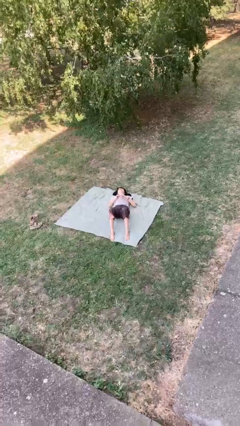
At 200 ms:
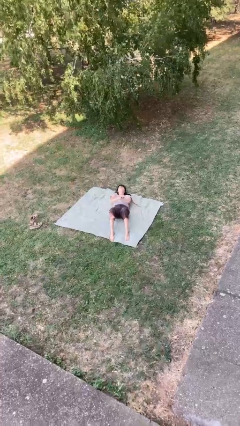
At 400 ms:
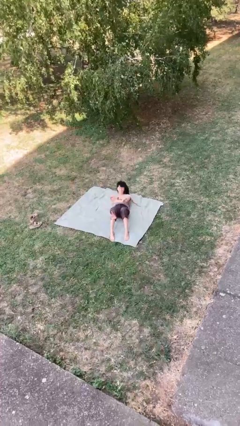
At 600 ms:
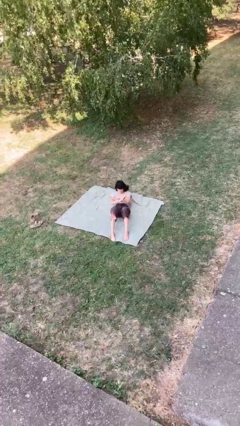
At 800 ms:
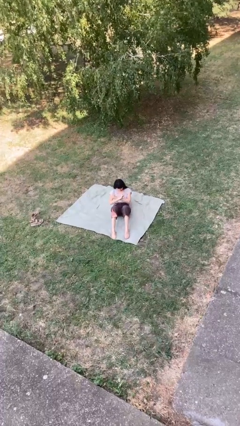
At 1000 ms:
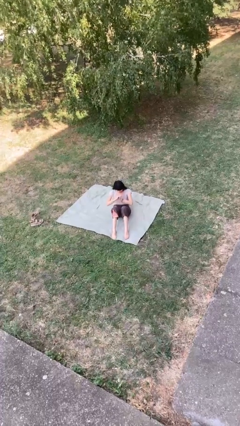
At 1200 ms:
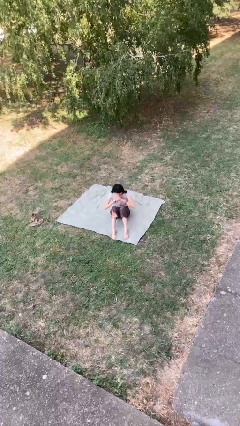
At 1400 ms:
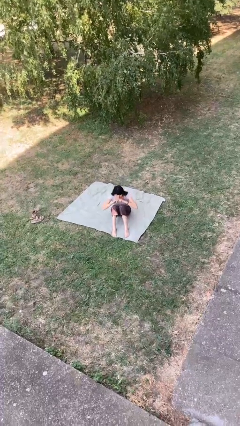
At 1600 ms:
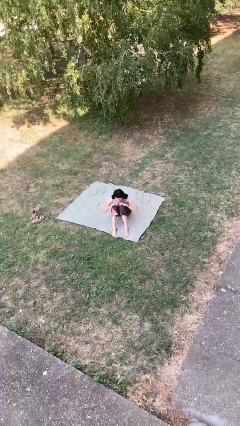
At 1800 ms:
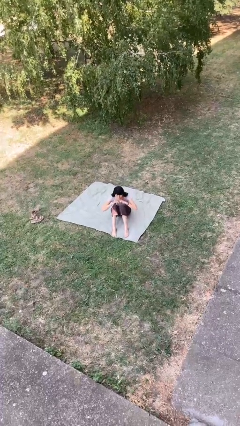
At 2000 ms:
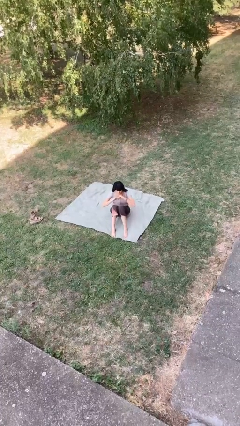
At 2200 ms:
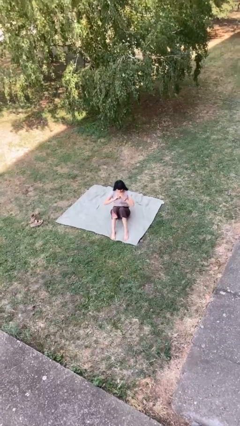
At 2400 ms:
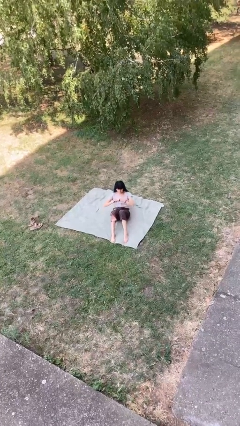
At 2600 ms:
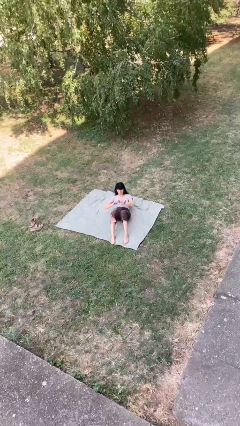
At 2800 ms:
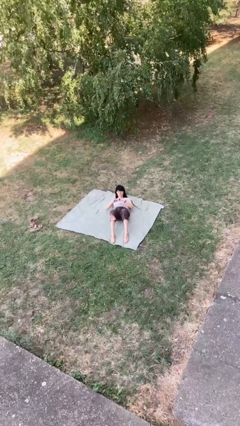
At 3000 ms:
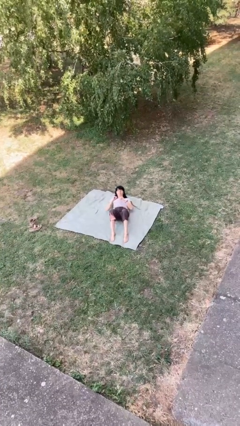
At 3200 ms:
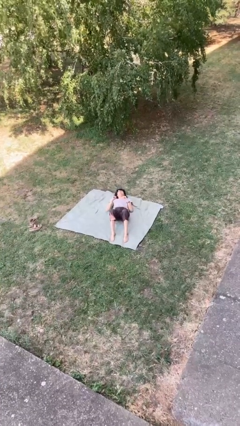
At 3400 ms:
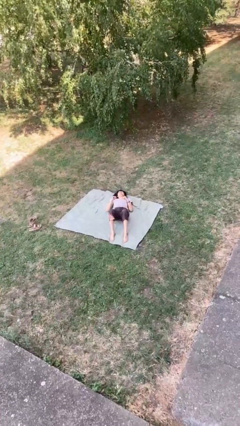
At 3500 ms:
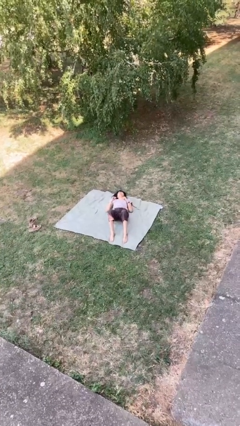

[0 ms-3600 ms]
person exercises with situp

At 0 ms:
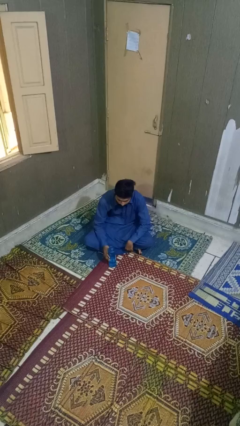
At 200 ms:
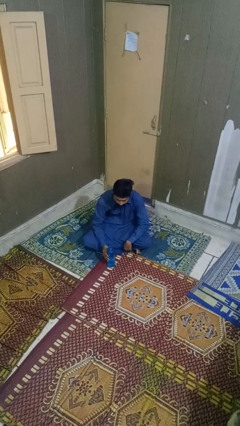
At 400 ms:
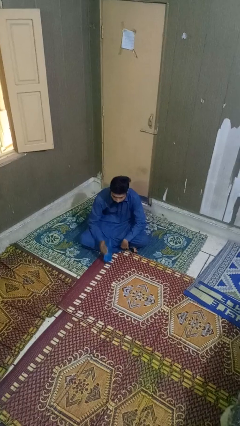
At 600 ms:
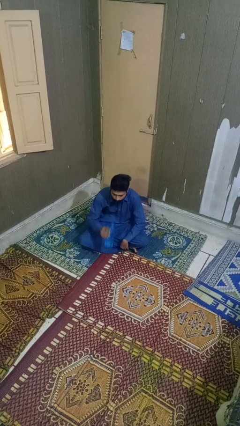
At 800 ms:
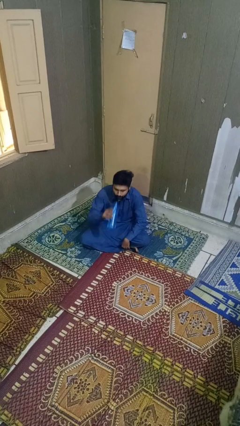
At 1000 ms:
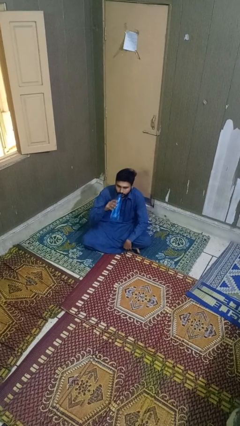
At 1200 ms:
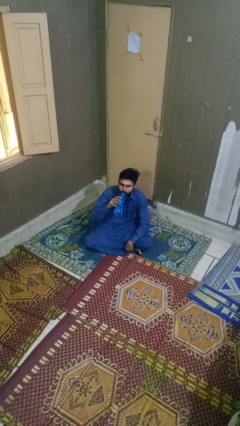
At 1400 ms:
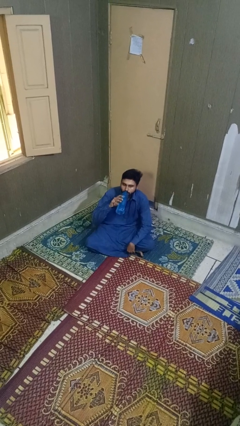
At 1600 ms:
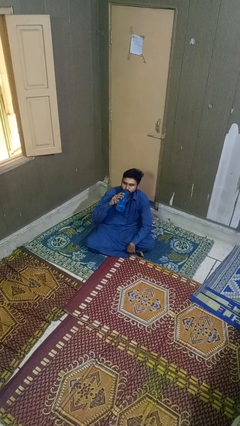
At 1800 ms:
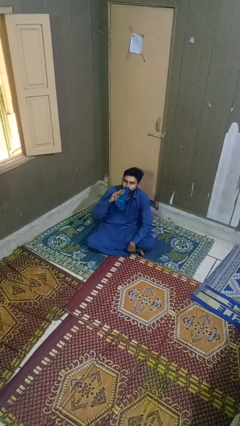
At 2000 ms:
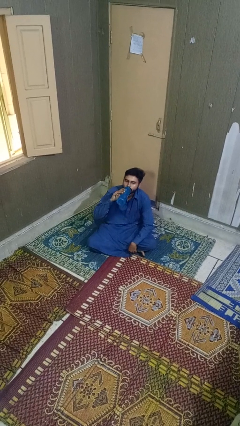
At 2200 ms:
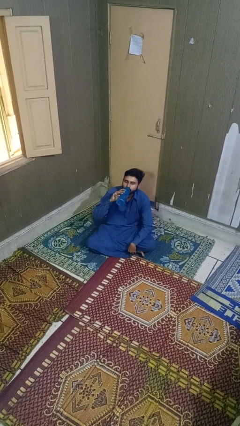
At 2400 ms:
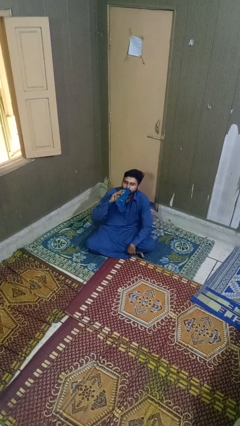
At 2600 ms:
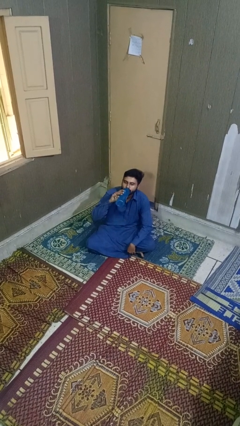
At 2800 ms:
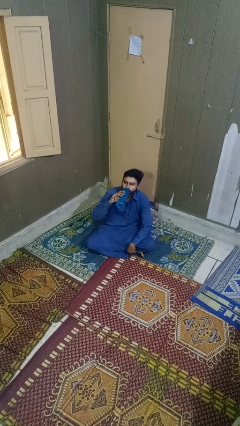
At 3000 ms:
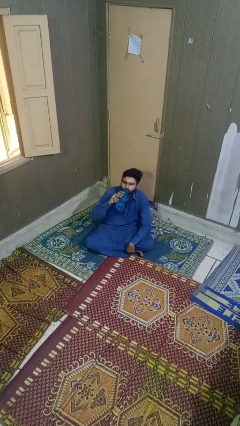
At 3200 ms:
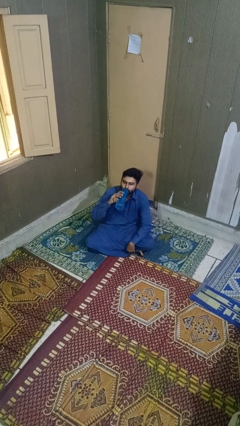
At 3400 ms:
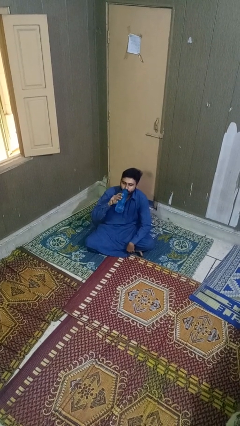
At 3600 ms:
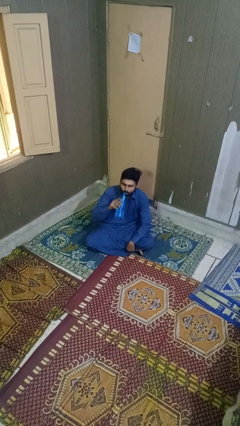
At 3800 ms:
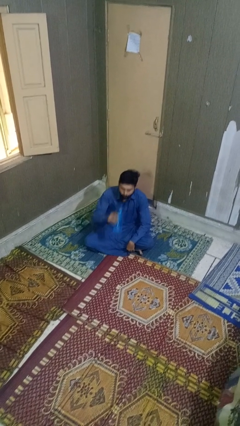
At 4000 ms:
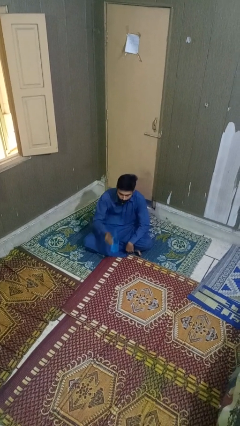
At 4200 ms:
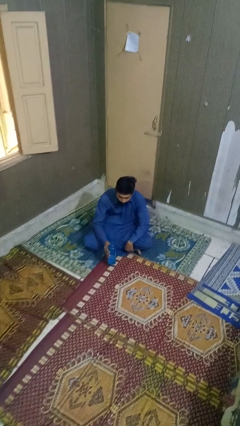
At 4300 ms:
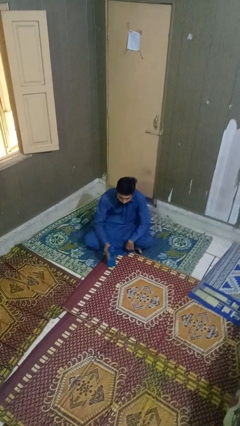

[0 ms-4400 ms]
person drinks from bottle

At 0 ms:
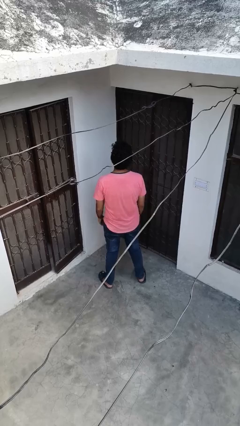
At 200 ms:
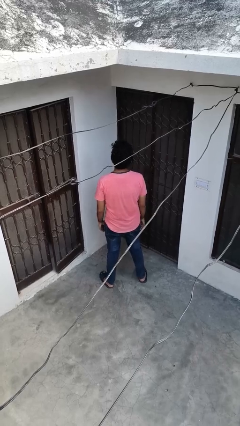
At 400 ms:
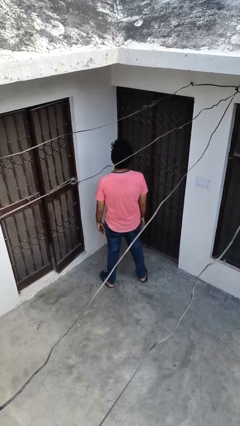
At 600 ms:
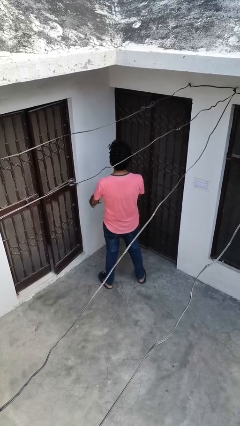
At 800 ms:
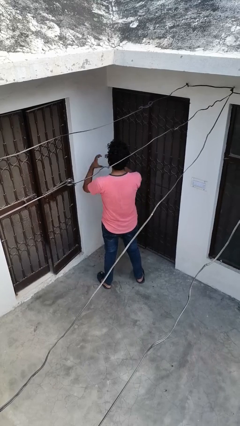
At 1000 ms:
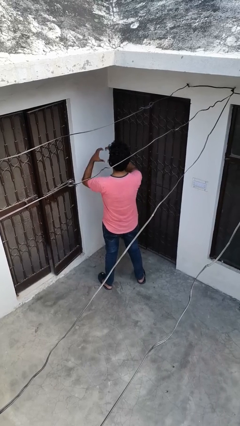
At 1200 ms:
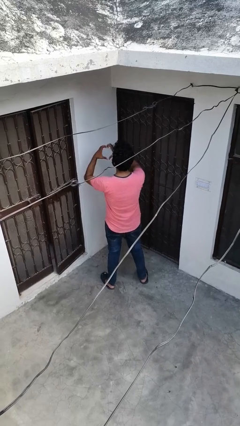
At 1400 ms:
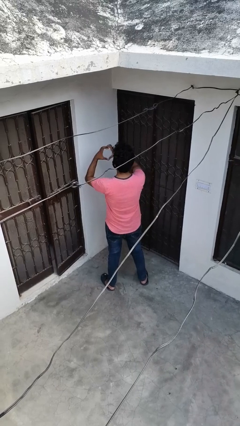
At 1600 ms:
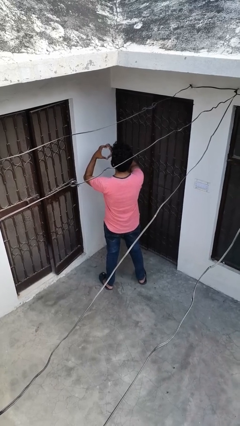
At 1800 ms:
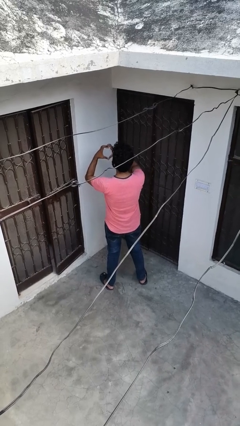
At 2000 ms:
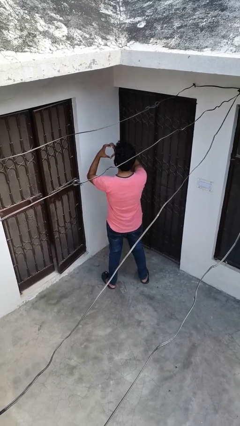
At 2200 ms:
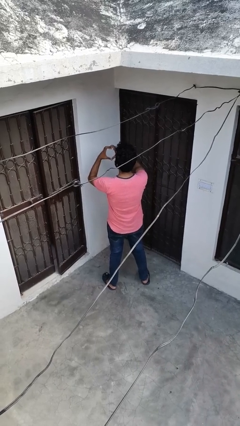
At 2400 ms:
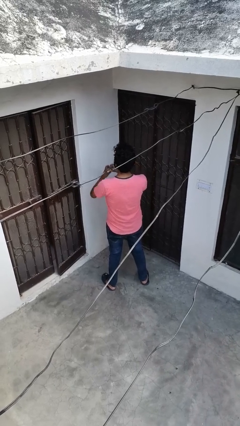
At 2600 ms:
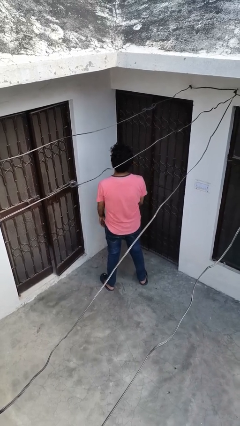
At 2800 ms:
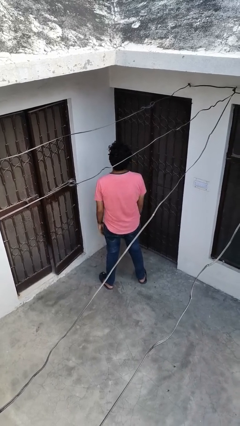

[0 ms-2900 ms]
person gestures heart

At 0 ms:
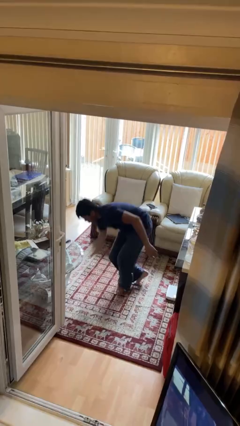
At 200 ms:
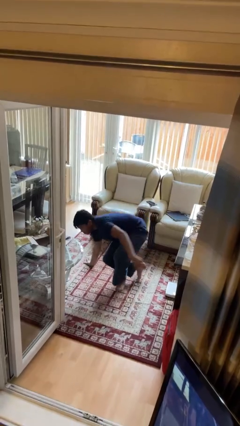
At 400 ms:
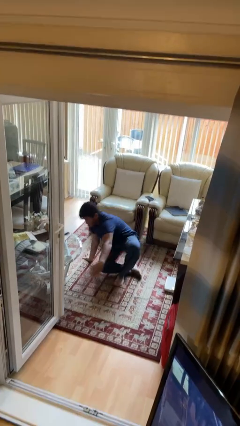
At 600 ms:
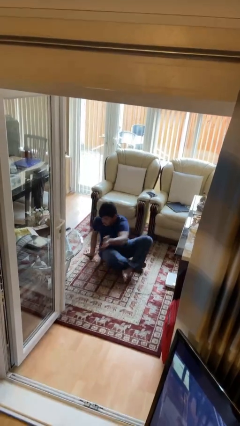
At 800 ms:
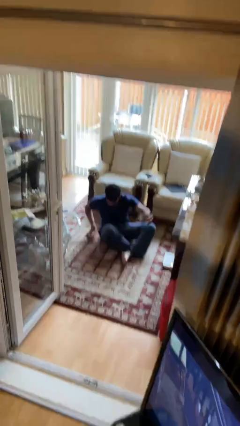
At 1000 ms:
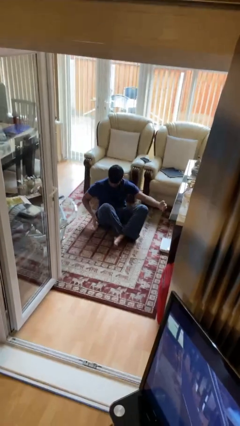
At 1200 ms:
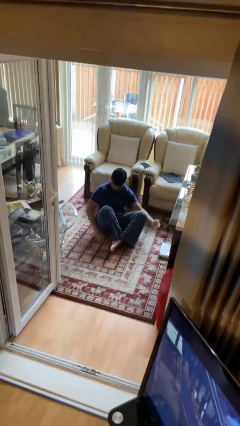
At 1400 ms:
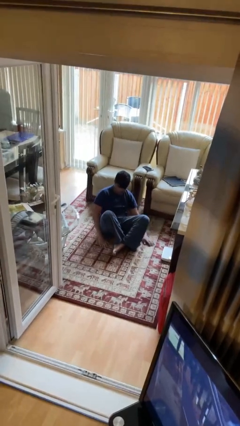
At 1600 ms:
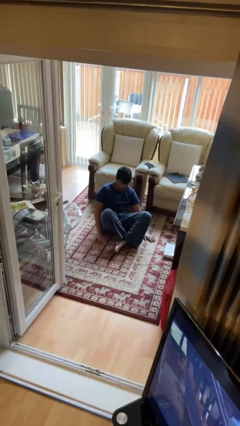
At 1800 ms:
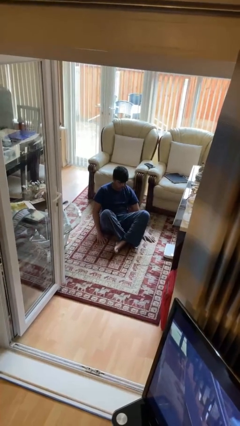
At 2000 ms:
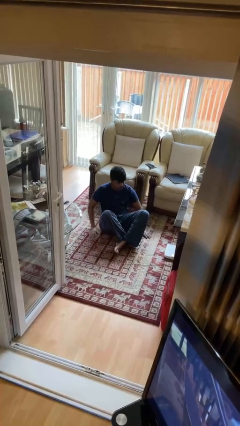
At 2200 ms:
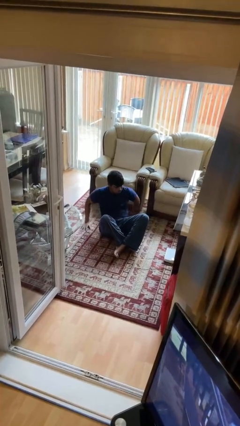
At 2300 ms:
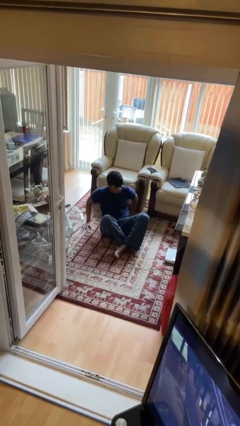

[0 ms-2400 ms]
person sits crisscross

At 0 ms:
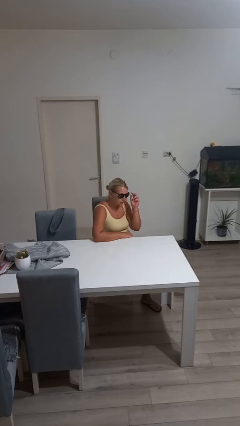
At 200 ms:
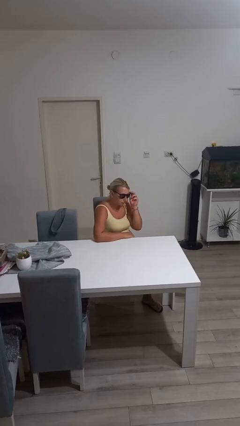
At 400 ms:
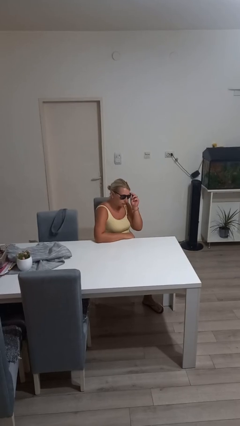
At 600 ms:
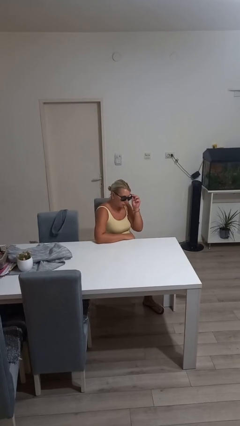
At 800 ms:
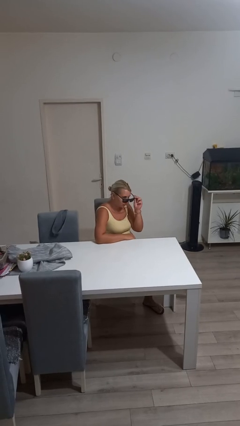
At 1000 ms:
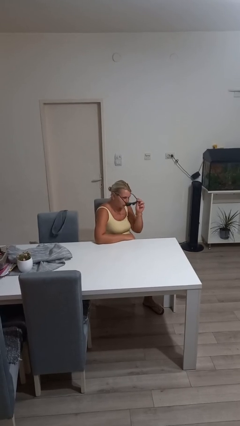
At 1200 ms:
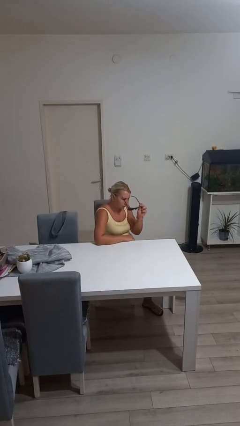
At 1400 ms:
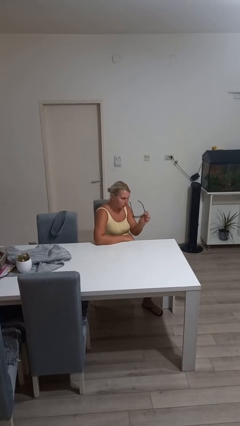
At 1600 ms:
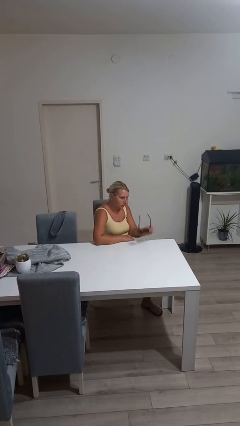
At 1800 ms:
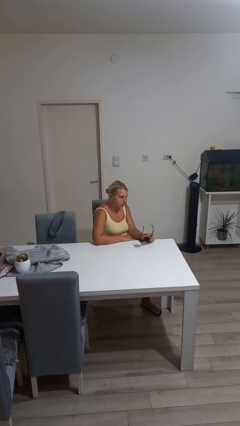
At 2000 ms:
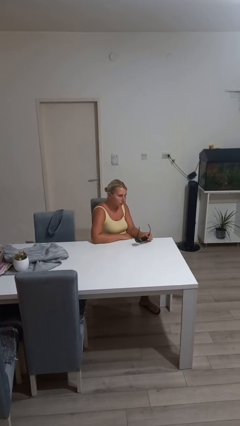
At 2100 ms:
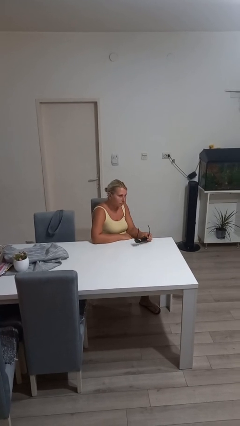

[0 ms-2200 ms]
person takes off sunglasses

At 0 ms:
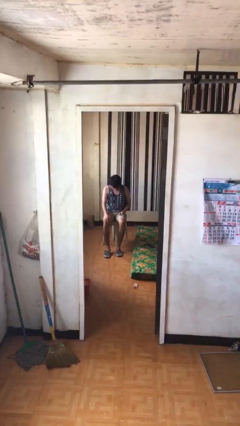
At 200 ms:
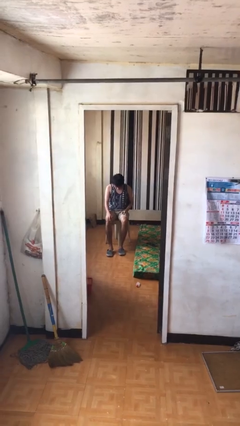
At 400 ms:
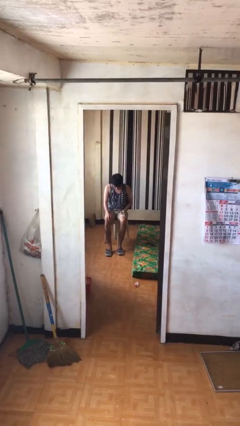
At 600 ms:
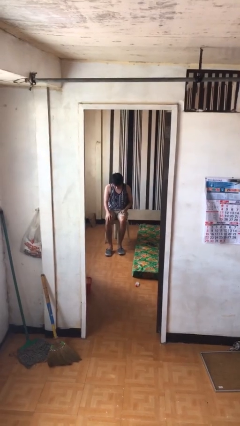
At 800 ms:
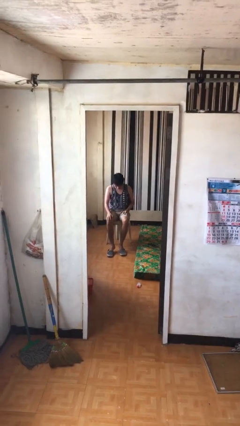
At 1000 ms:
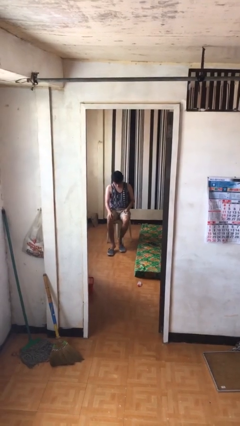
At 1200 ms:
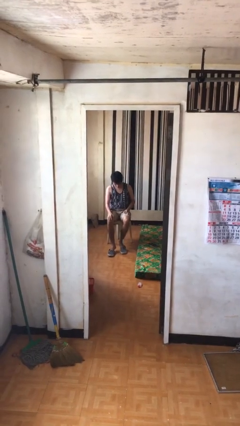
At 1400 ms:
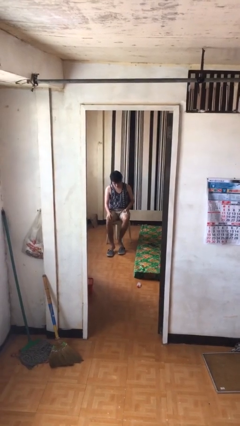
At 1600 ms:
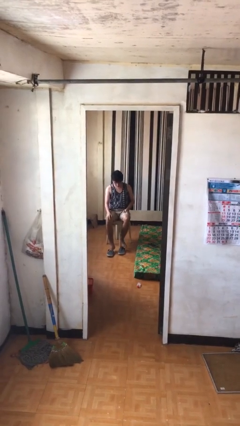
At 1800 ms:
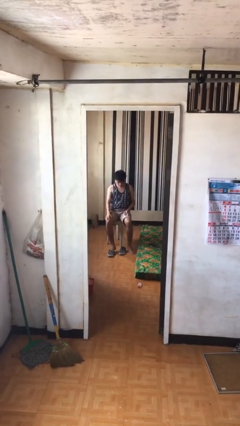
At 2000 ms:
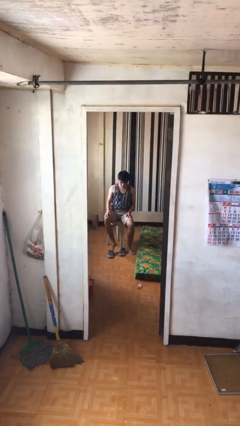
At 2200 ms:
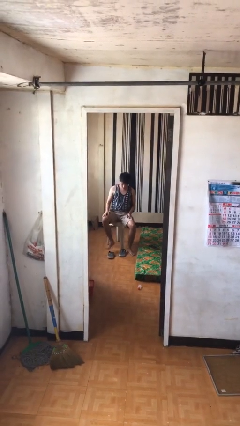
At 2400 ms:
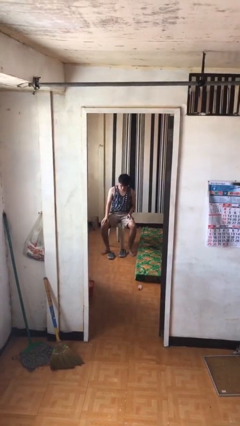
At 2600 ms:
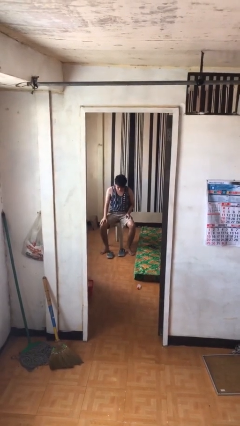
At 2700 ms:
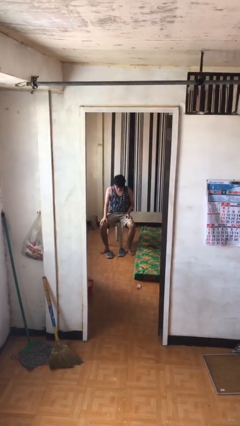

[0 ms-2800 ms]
person takes off shoes
